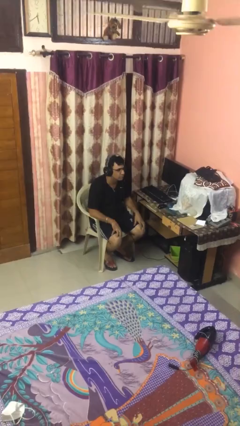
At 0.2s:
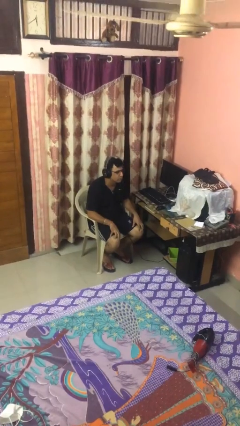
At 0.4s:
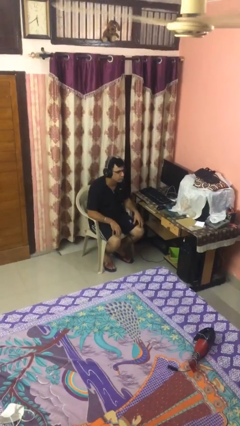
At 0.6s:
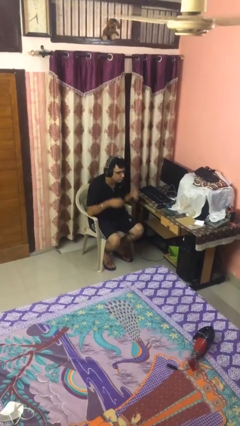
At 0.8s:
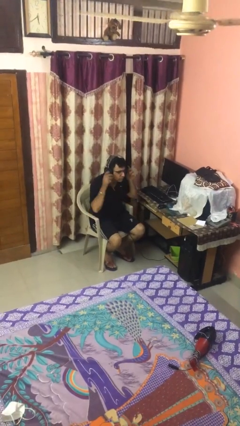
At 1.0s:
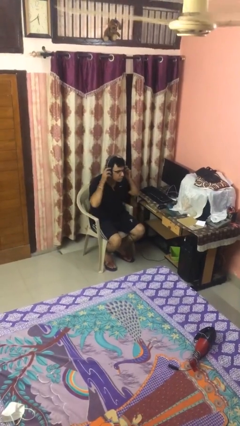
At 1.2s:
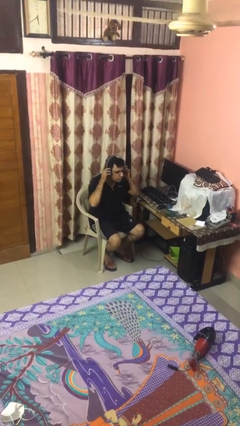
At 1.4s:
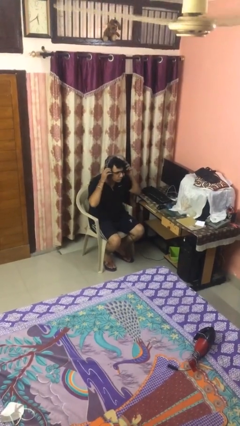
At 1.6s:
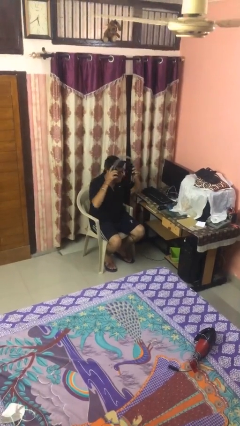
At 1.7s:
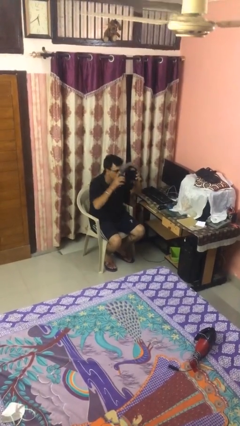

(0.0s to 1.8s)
person takes off headphones

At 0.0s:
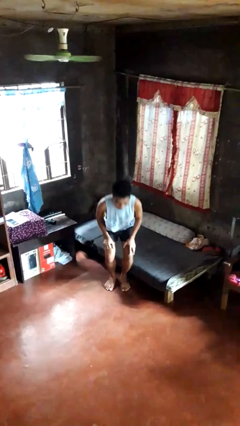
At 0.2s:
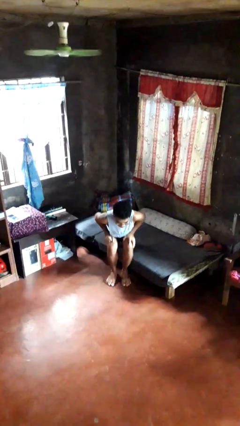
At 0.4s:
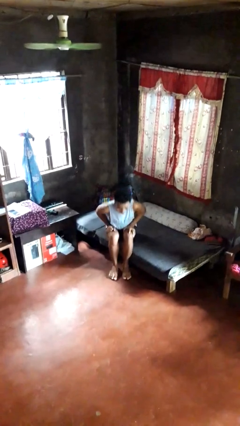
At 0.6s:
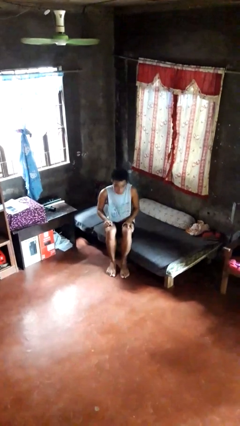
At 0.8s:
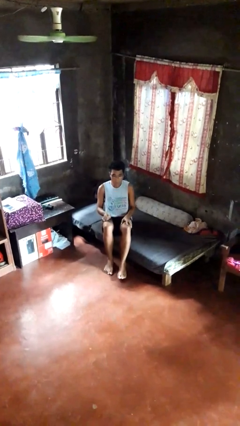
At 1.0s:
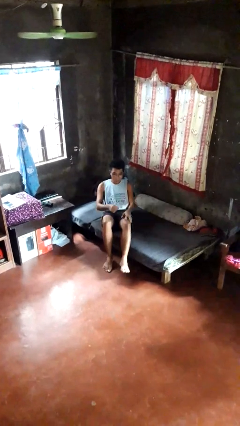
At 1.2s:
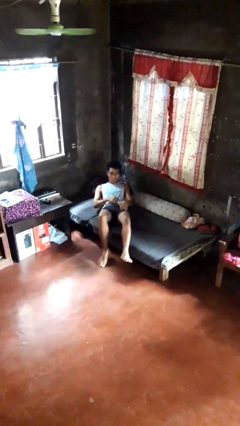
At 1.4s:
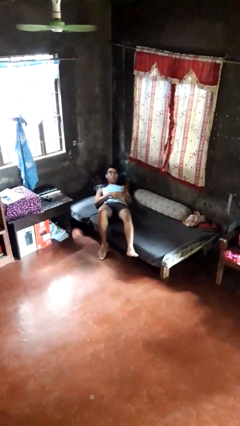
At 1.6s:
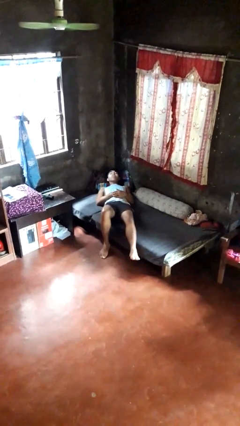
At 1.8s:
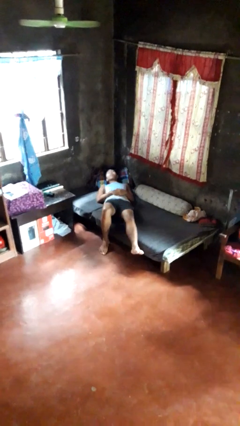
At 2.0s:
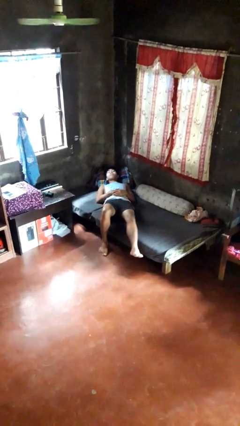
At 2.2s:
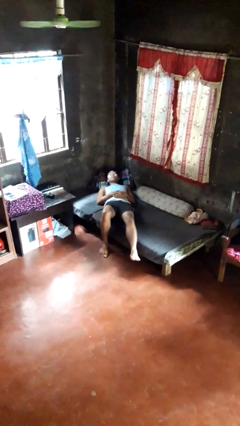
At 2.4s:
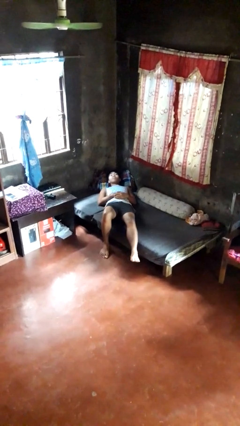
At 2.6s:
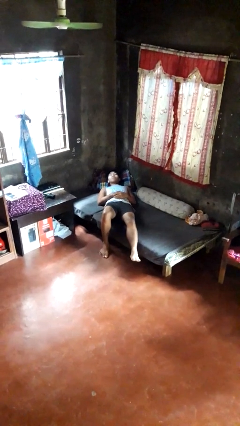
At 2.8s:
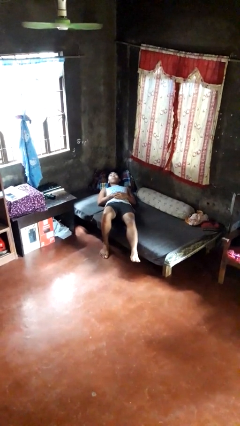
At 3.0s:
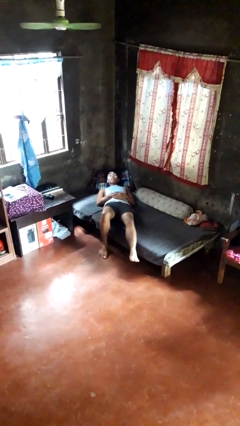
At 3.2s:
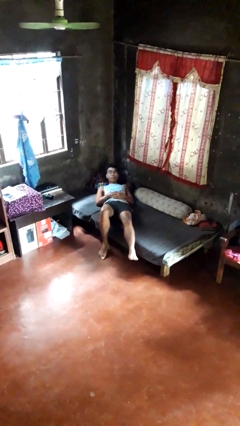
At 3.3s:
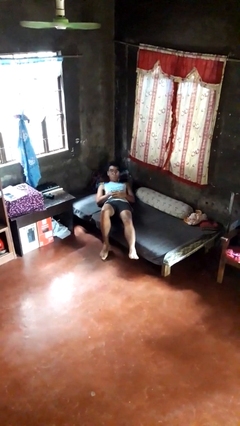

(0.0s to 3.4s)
person lies down on bed

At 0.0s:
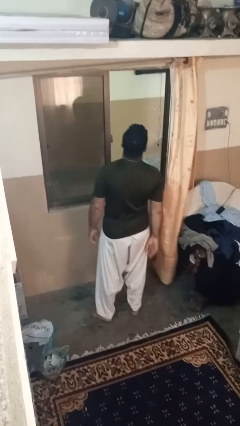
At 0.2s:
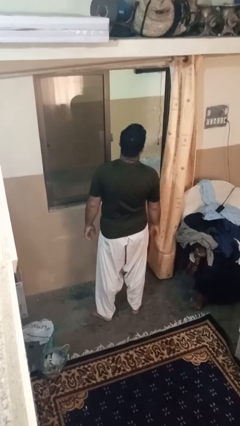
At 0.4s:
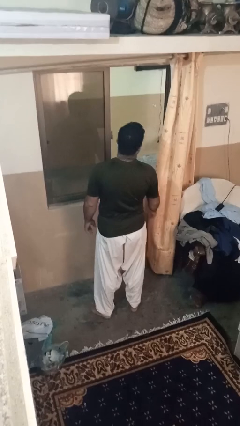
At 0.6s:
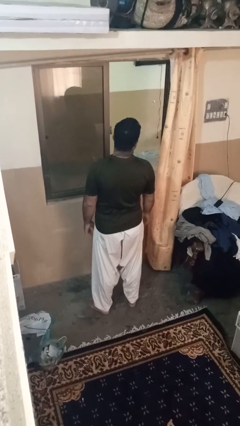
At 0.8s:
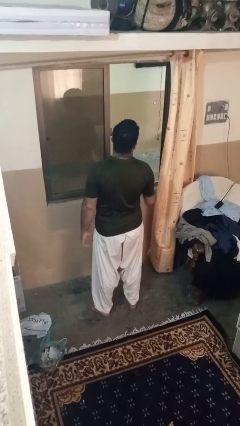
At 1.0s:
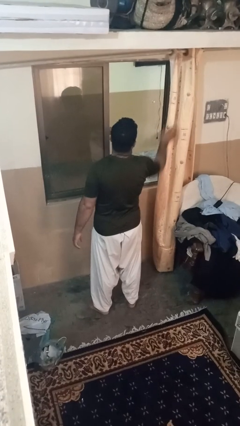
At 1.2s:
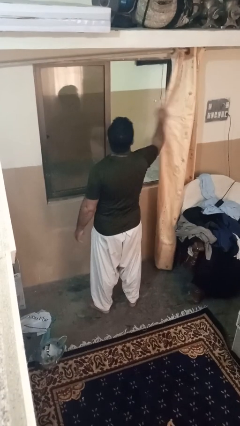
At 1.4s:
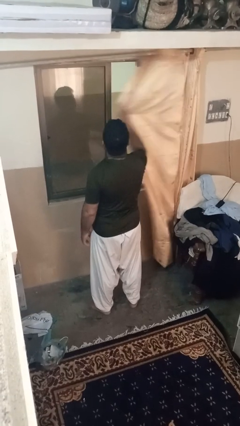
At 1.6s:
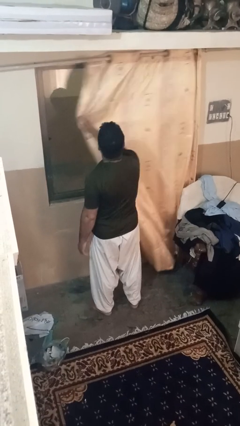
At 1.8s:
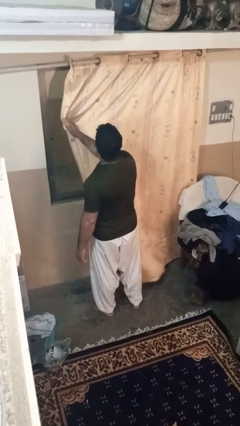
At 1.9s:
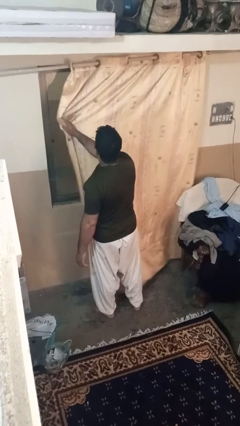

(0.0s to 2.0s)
person closes curtains

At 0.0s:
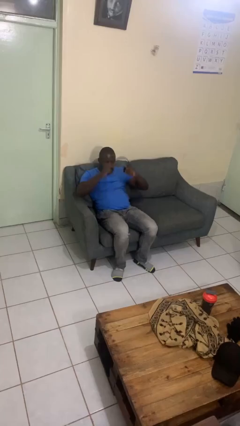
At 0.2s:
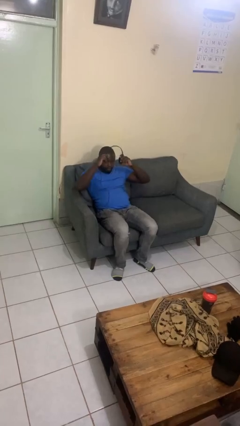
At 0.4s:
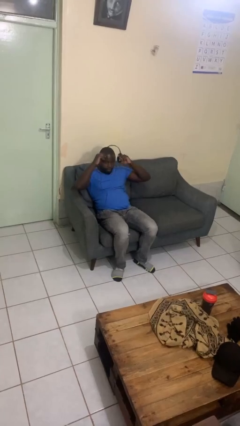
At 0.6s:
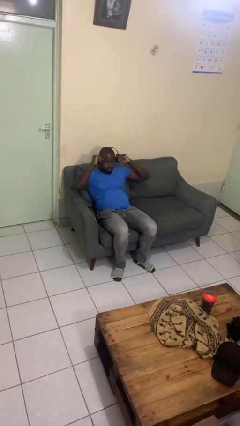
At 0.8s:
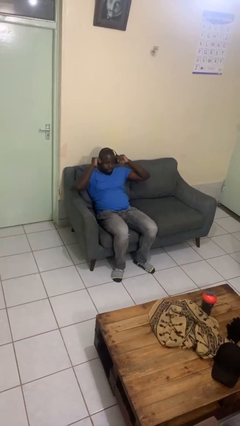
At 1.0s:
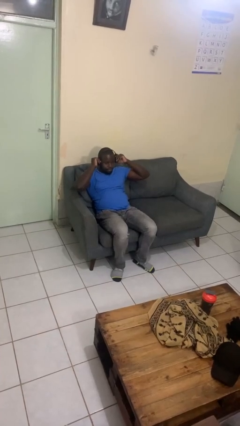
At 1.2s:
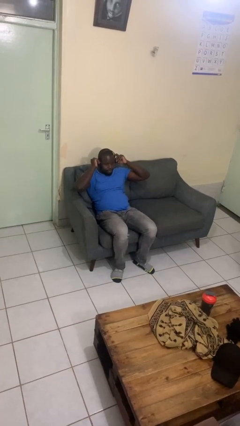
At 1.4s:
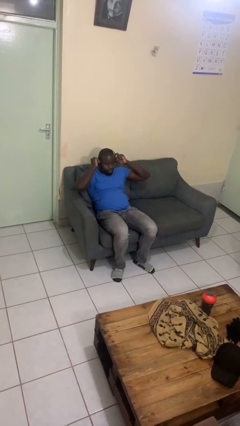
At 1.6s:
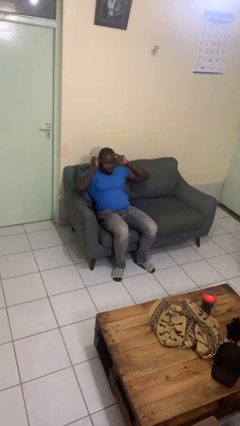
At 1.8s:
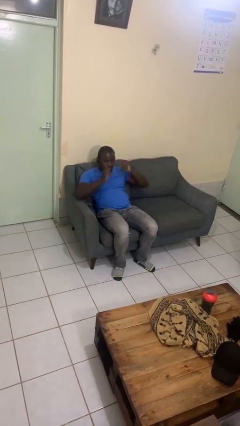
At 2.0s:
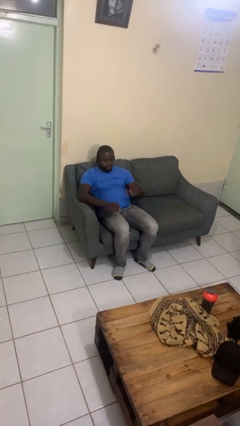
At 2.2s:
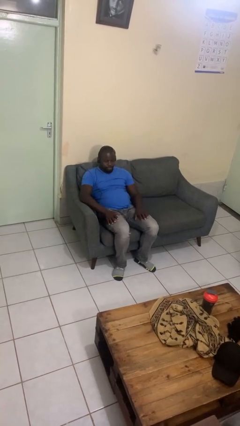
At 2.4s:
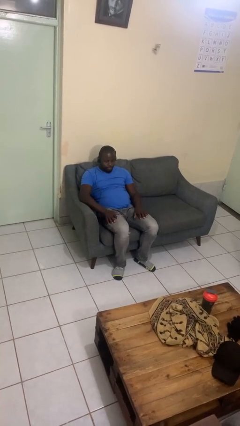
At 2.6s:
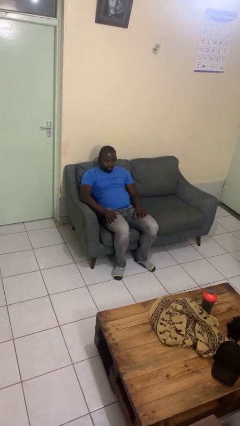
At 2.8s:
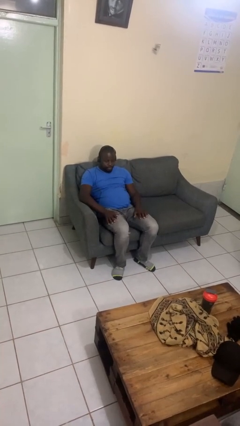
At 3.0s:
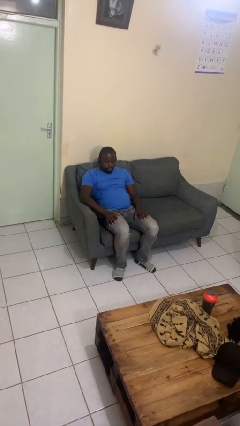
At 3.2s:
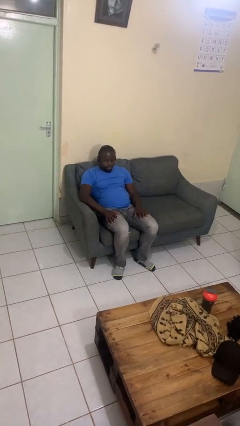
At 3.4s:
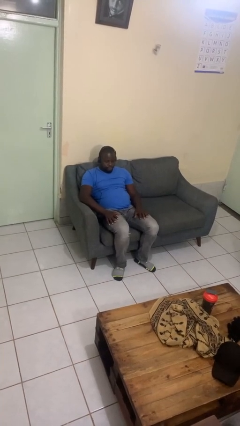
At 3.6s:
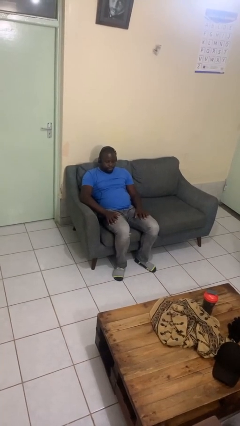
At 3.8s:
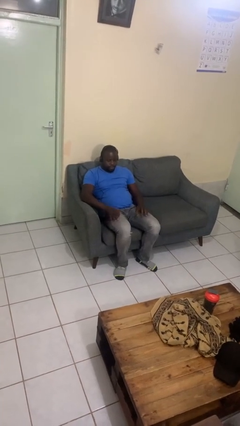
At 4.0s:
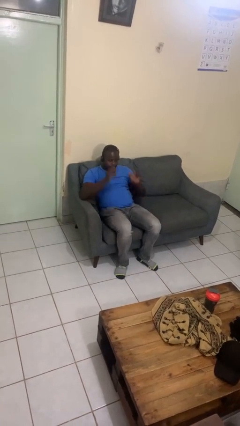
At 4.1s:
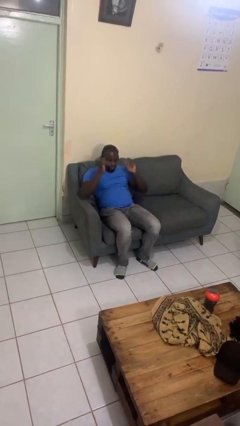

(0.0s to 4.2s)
person puts on headphones

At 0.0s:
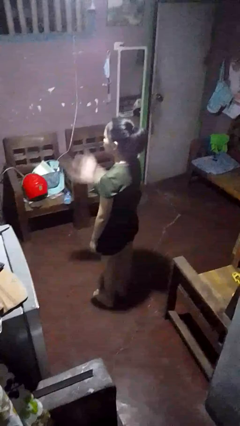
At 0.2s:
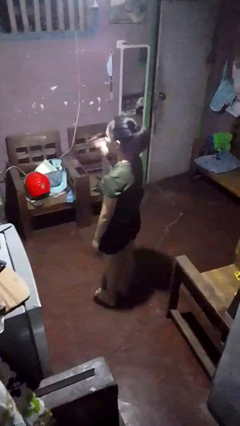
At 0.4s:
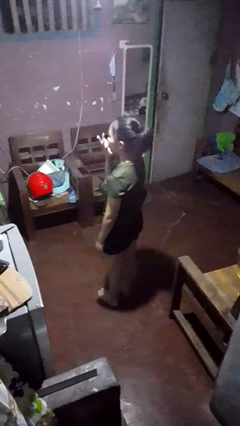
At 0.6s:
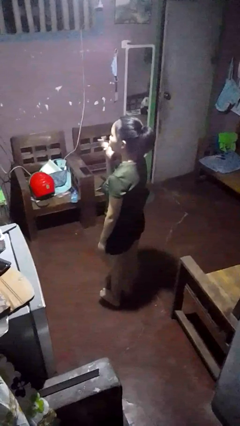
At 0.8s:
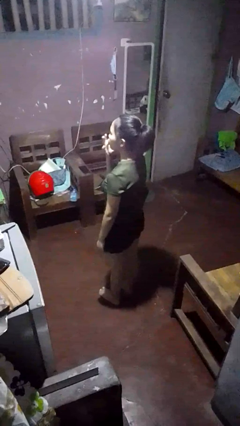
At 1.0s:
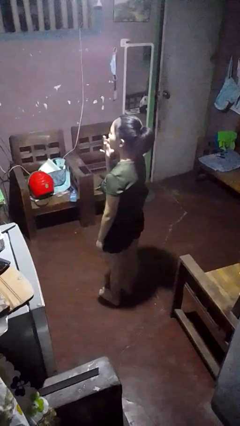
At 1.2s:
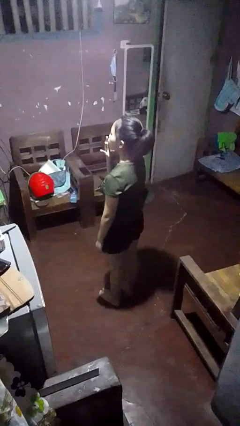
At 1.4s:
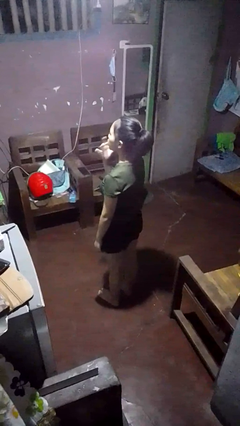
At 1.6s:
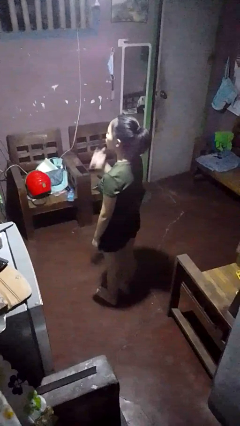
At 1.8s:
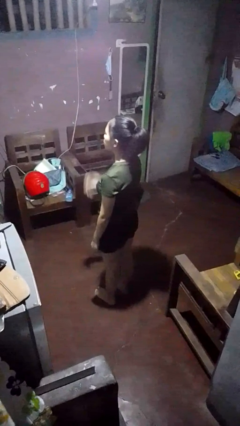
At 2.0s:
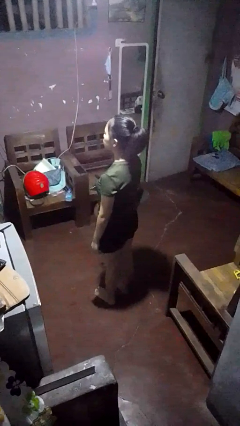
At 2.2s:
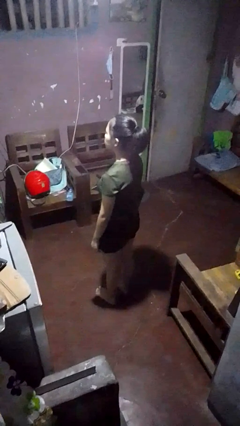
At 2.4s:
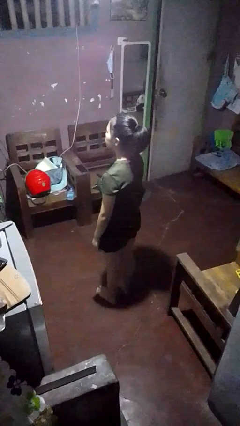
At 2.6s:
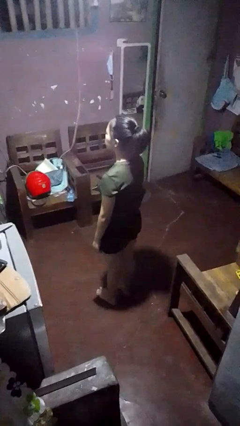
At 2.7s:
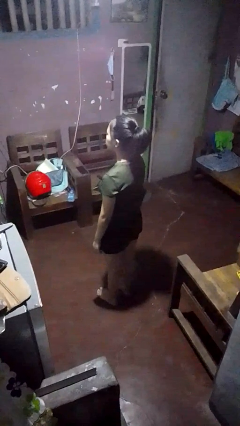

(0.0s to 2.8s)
person licks fingers

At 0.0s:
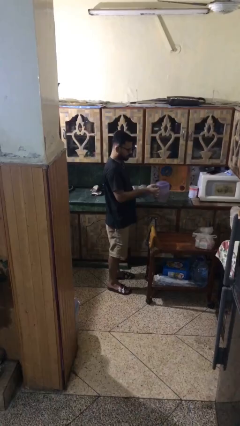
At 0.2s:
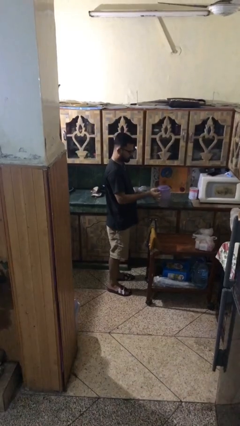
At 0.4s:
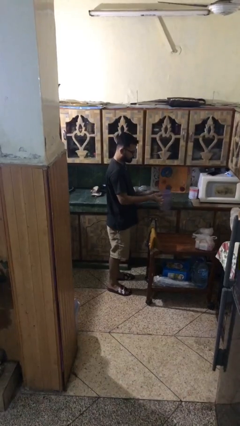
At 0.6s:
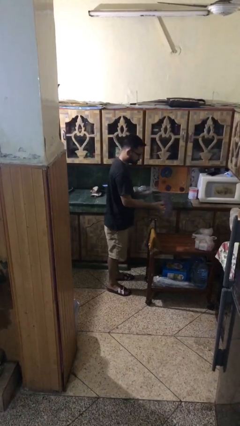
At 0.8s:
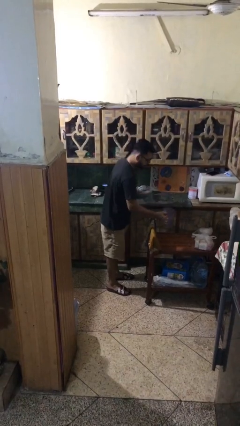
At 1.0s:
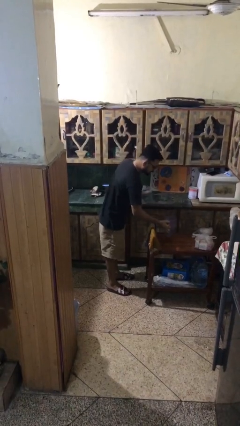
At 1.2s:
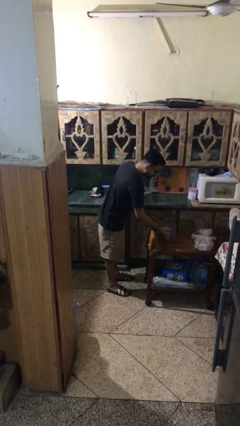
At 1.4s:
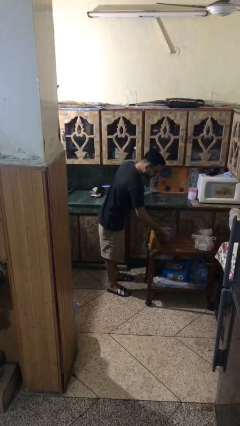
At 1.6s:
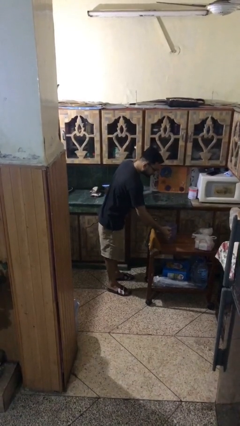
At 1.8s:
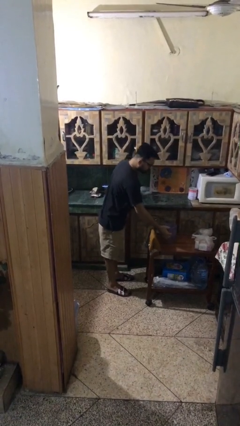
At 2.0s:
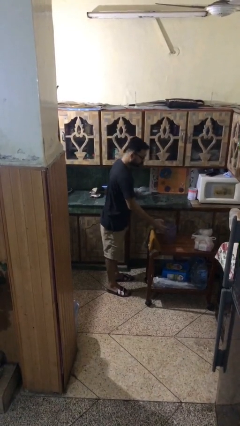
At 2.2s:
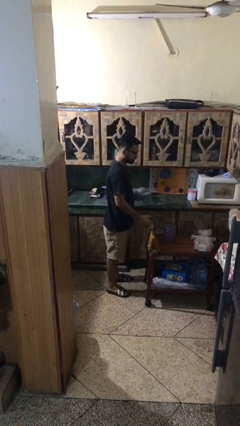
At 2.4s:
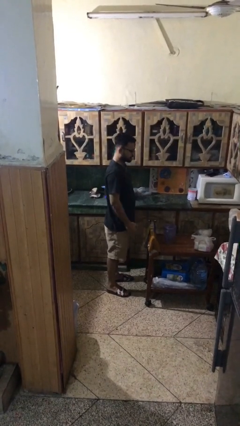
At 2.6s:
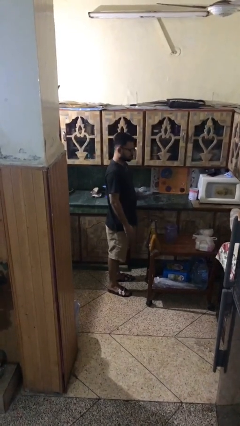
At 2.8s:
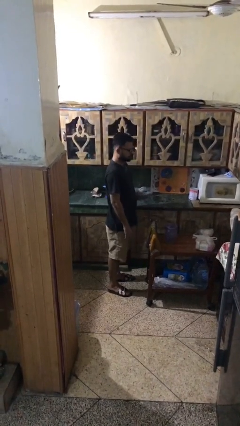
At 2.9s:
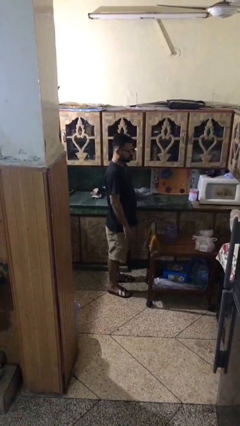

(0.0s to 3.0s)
person puts down object on table

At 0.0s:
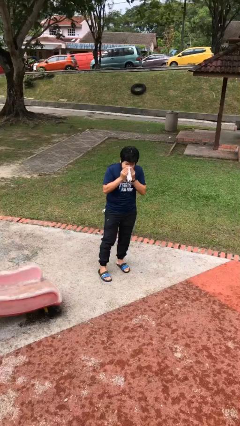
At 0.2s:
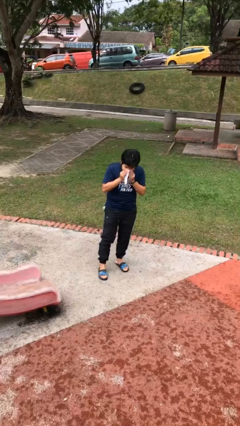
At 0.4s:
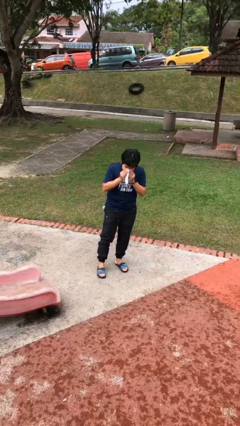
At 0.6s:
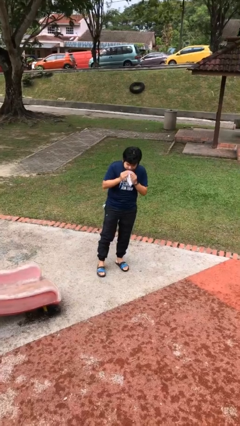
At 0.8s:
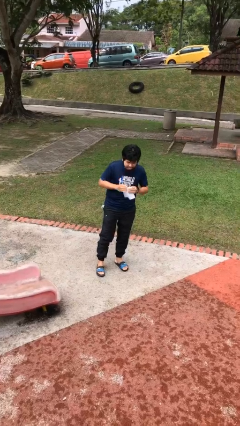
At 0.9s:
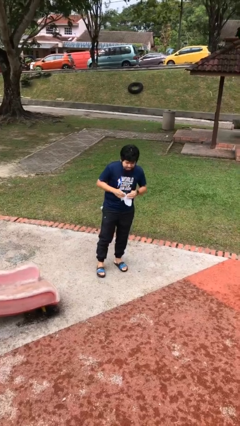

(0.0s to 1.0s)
person blows nose
